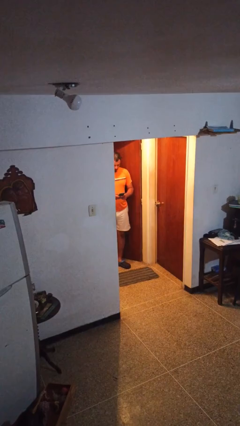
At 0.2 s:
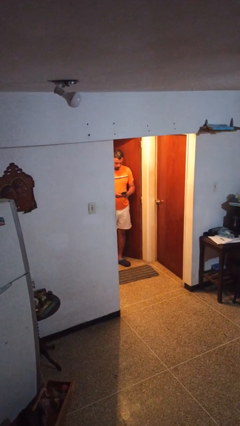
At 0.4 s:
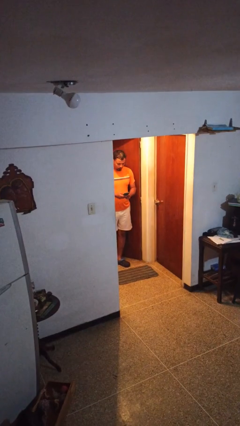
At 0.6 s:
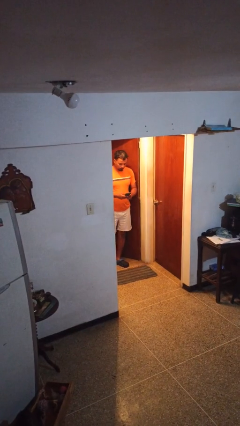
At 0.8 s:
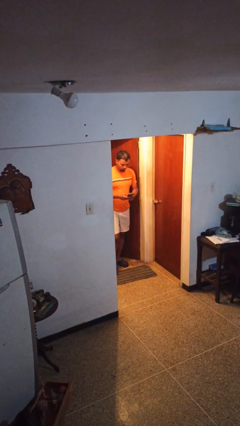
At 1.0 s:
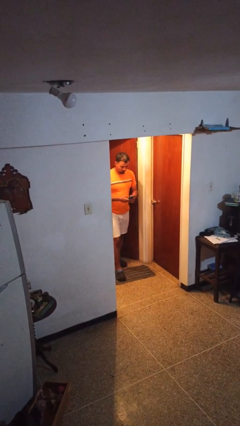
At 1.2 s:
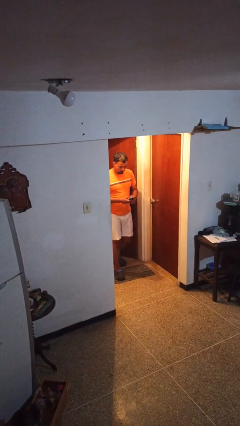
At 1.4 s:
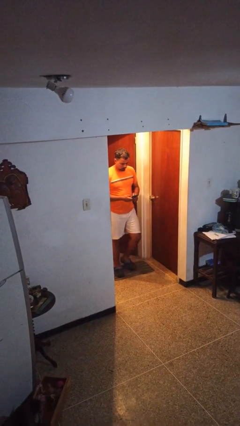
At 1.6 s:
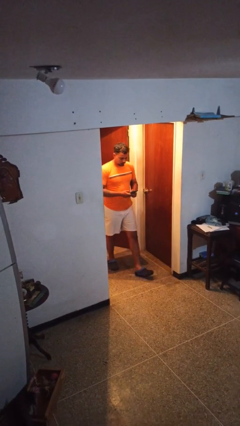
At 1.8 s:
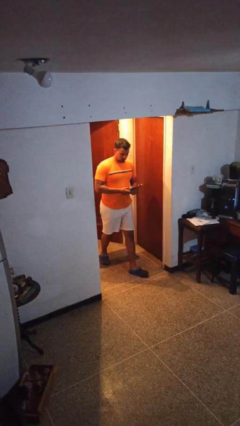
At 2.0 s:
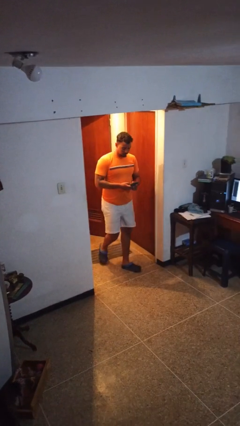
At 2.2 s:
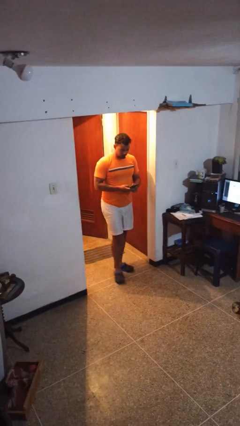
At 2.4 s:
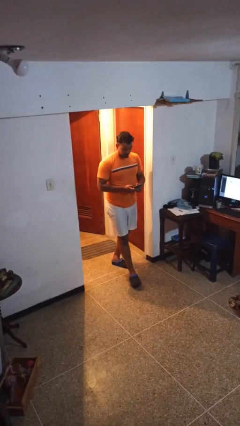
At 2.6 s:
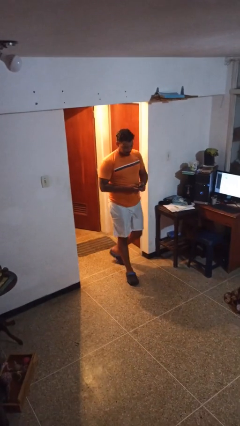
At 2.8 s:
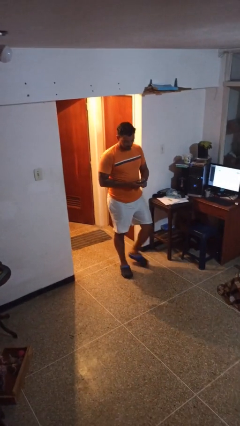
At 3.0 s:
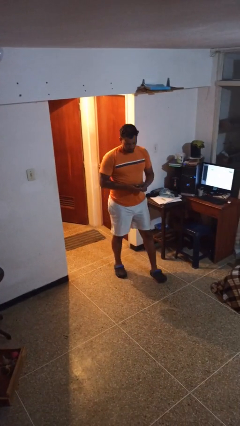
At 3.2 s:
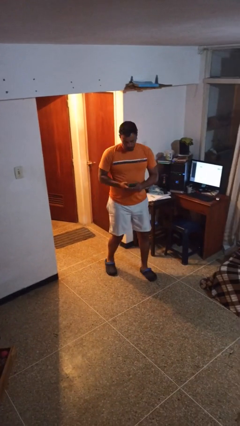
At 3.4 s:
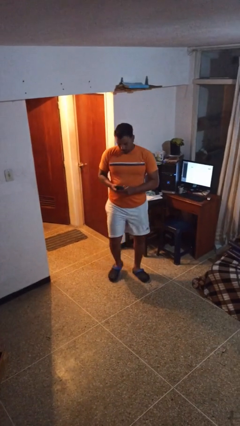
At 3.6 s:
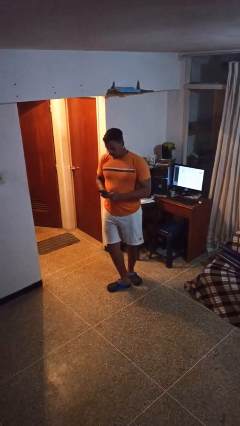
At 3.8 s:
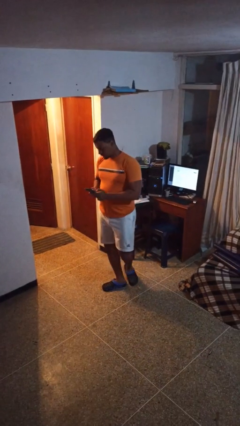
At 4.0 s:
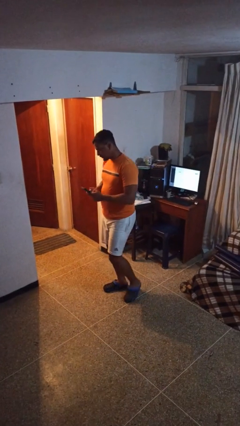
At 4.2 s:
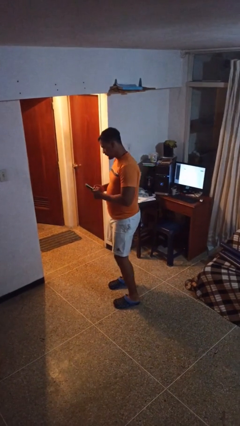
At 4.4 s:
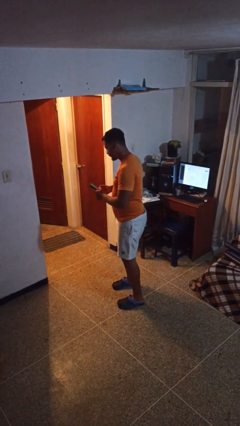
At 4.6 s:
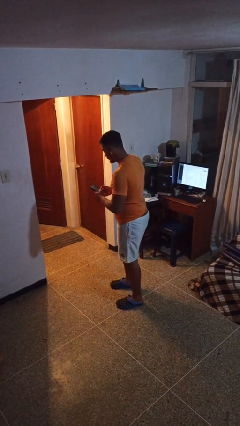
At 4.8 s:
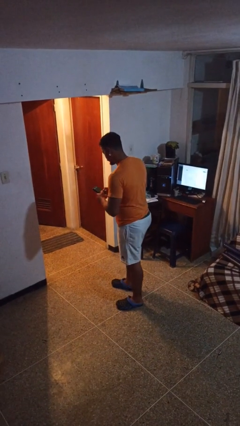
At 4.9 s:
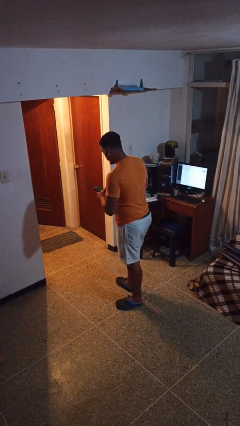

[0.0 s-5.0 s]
person enters scene through structure

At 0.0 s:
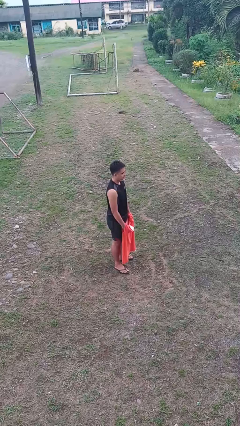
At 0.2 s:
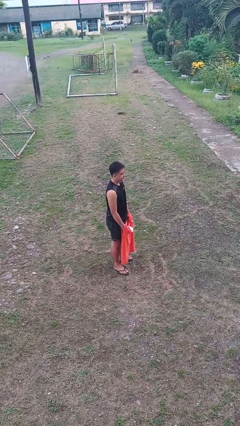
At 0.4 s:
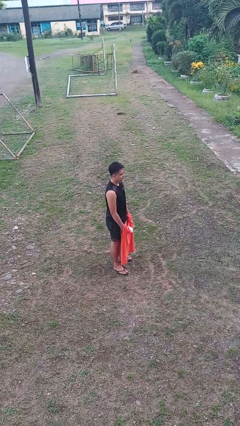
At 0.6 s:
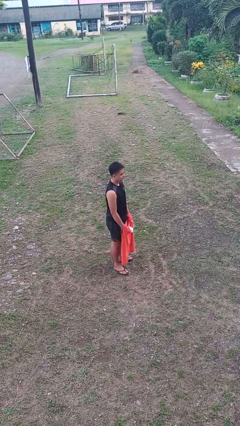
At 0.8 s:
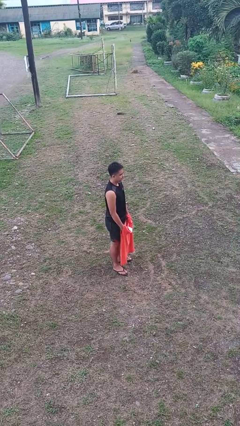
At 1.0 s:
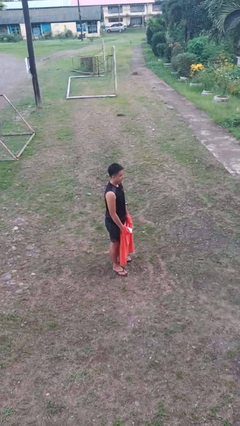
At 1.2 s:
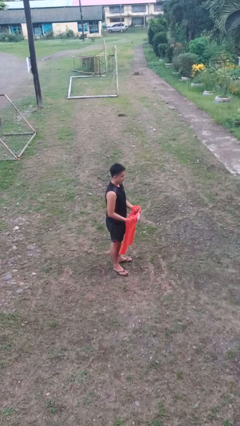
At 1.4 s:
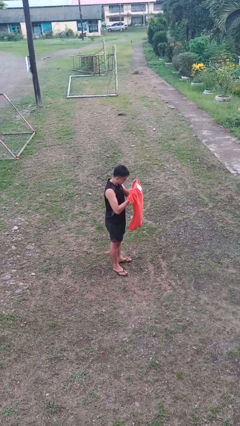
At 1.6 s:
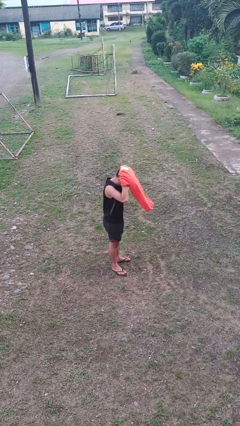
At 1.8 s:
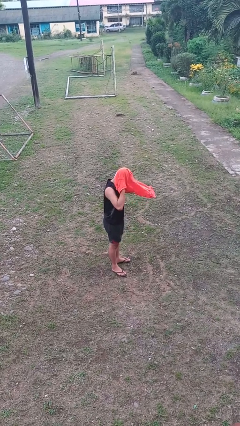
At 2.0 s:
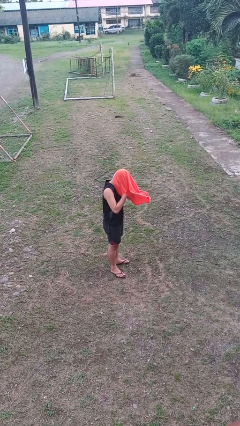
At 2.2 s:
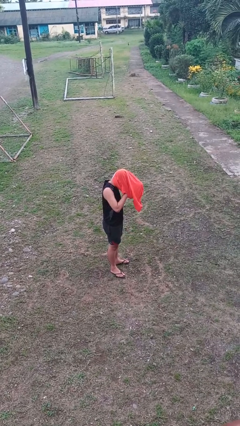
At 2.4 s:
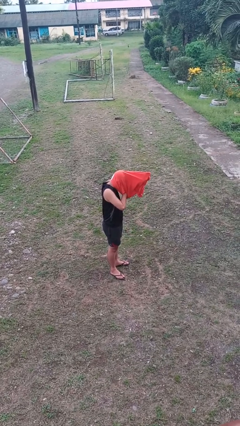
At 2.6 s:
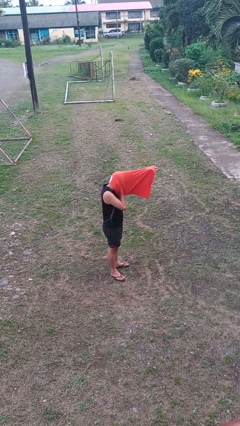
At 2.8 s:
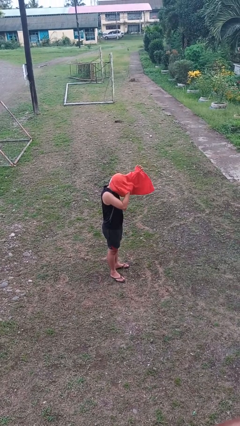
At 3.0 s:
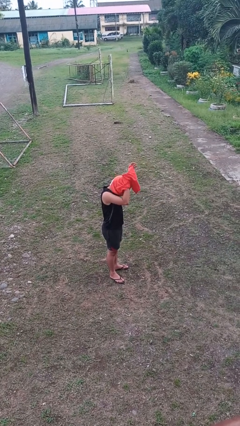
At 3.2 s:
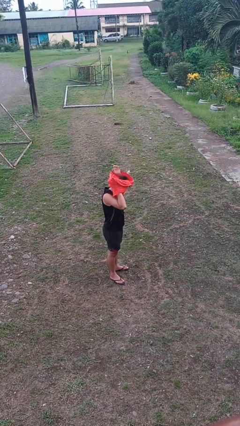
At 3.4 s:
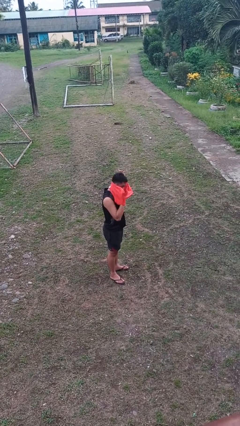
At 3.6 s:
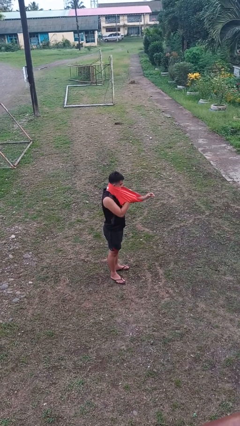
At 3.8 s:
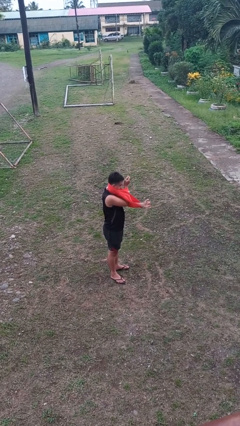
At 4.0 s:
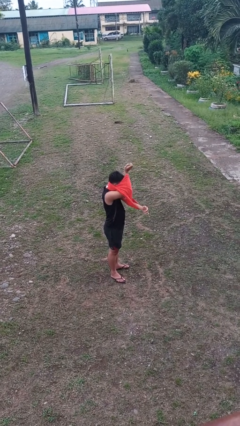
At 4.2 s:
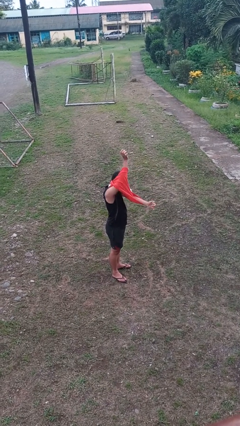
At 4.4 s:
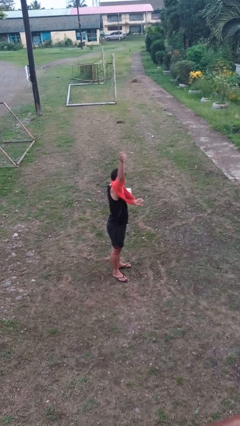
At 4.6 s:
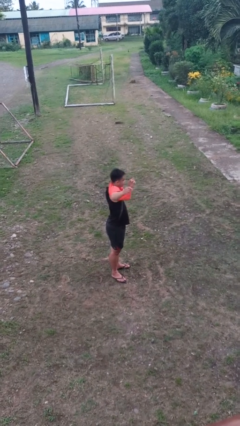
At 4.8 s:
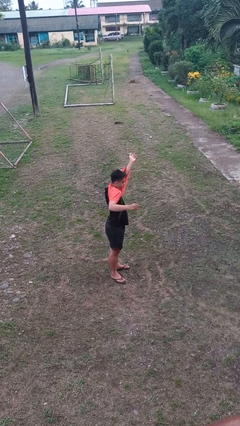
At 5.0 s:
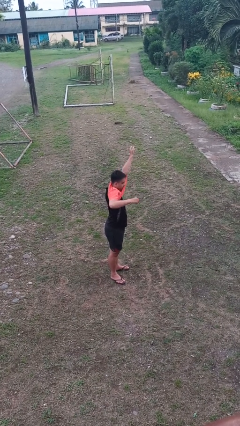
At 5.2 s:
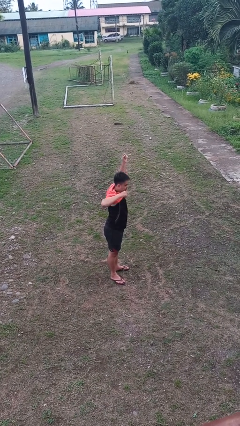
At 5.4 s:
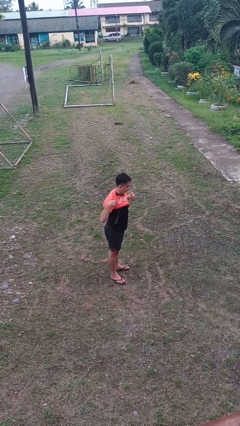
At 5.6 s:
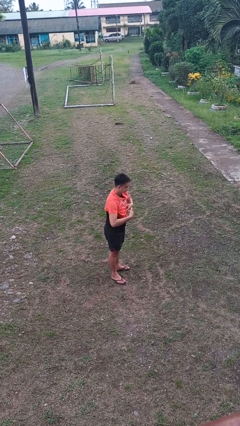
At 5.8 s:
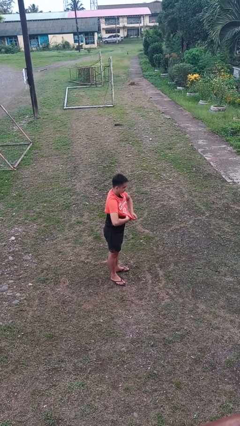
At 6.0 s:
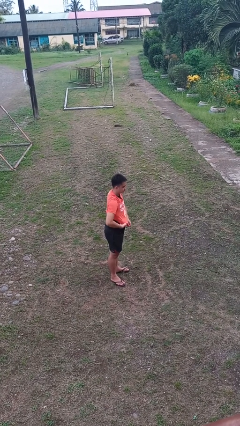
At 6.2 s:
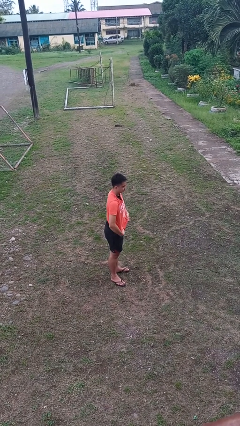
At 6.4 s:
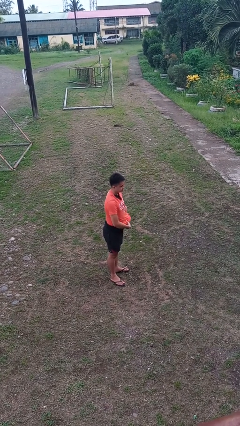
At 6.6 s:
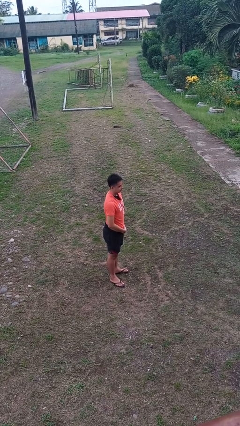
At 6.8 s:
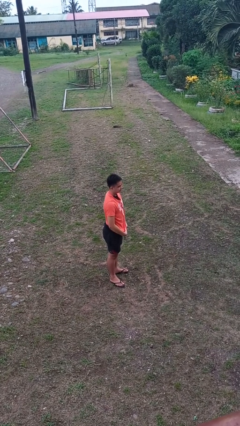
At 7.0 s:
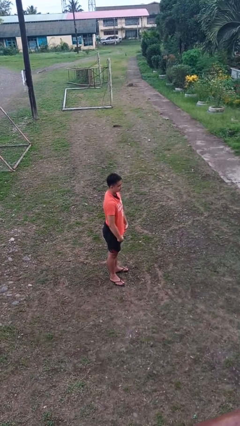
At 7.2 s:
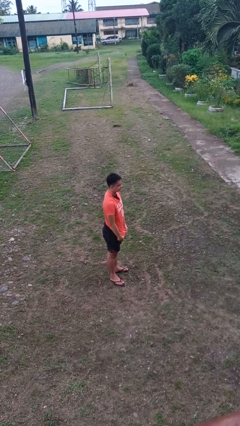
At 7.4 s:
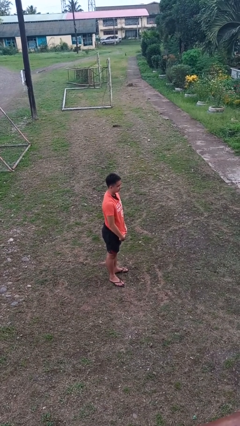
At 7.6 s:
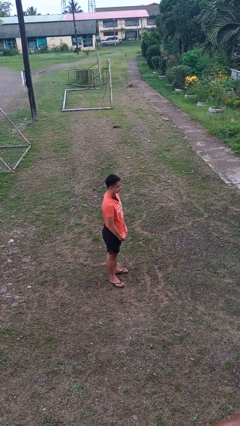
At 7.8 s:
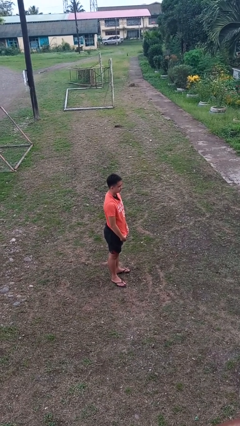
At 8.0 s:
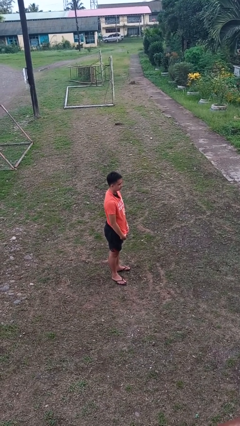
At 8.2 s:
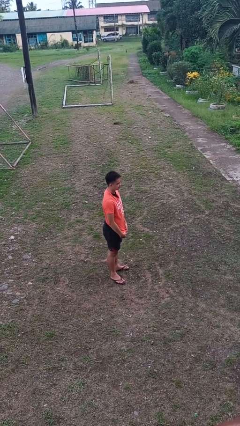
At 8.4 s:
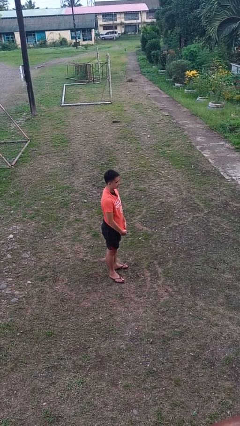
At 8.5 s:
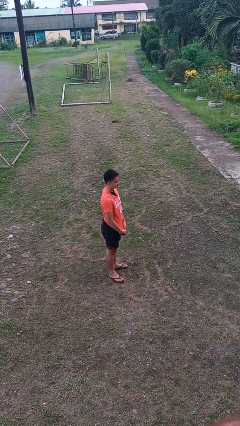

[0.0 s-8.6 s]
person puts on shirt

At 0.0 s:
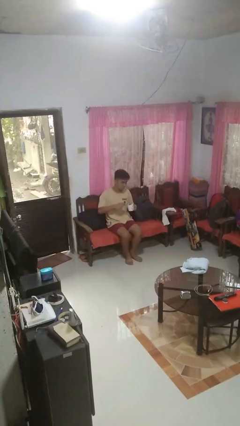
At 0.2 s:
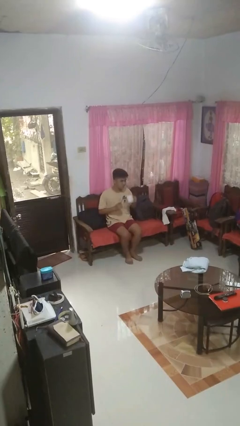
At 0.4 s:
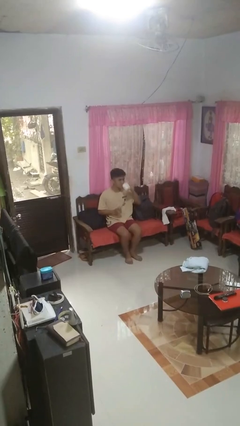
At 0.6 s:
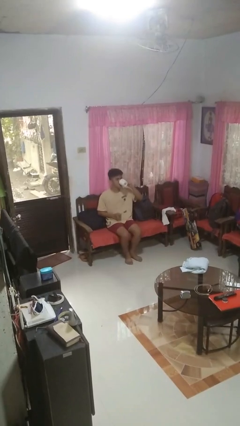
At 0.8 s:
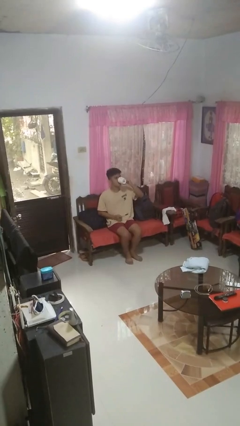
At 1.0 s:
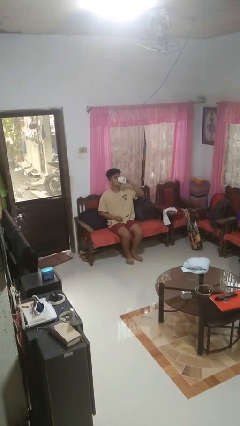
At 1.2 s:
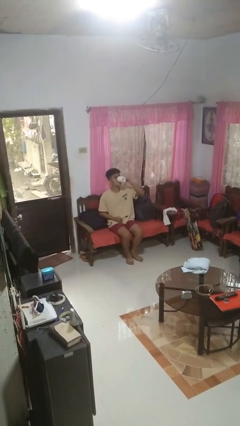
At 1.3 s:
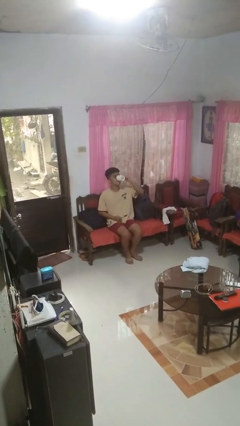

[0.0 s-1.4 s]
person drinks from mug

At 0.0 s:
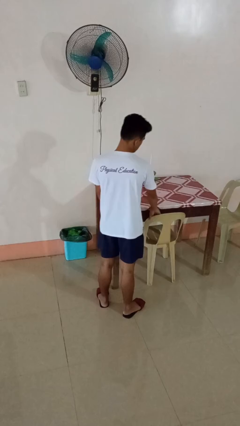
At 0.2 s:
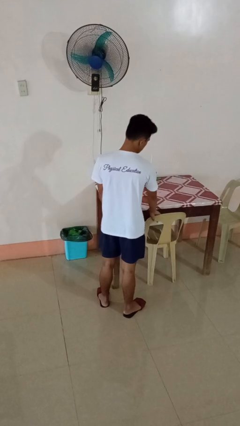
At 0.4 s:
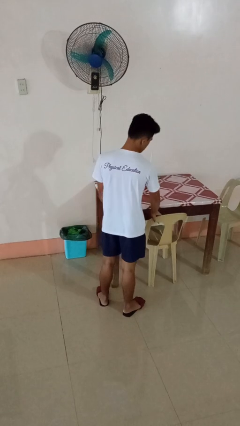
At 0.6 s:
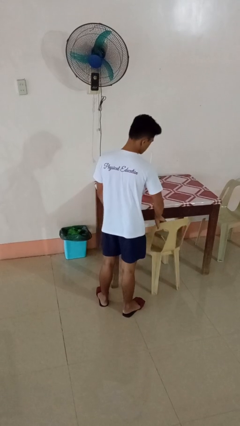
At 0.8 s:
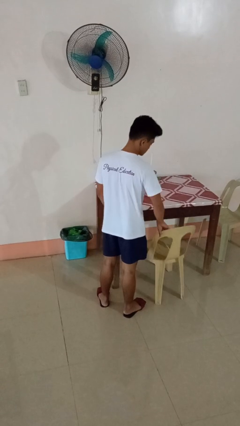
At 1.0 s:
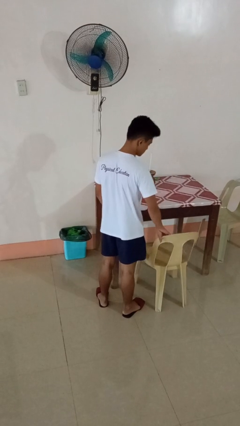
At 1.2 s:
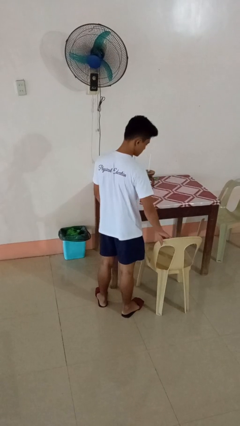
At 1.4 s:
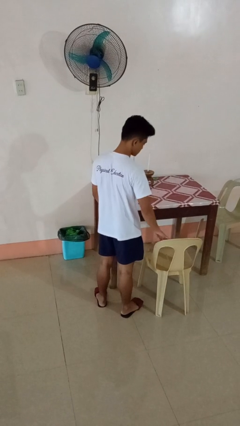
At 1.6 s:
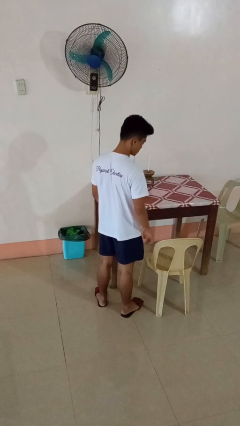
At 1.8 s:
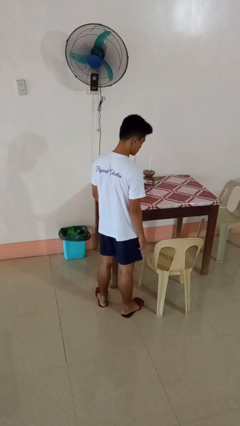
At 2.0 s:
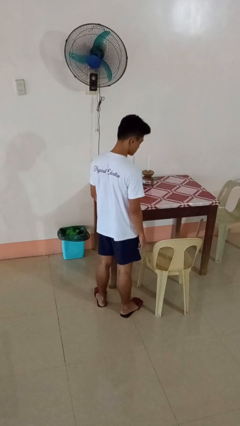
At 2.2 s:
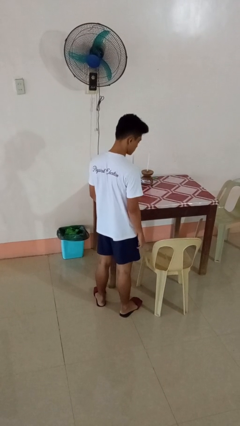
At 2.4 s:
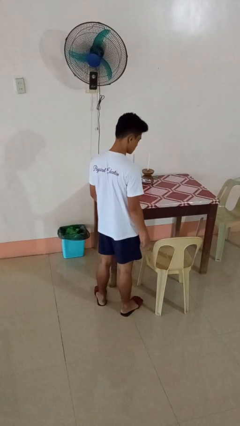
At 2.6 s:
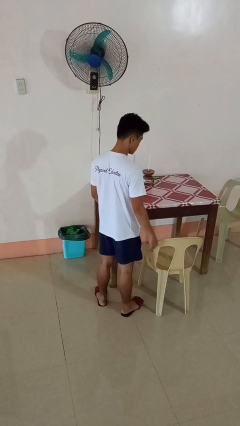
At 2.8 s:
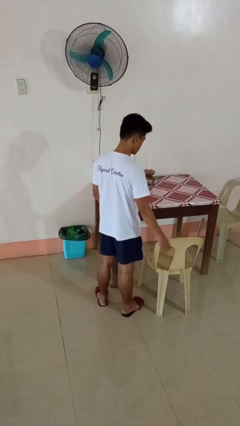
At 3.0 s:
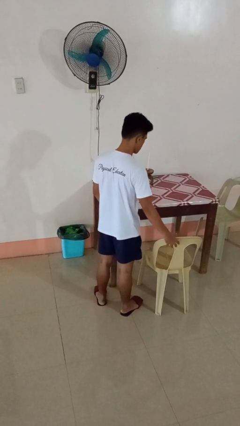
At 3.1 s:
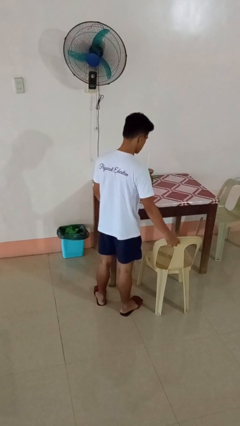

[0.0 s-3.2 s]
person pulls out chair
